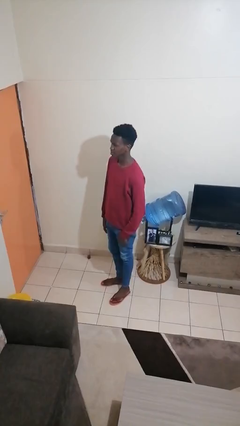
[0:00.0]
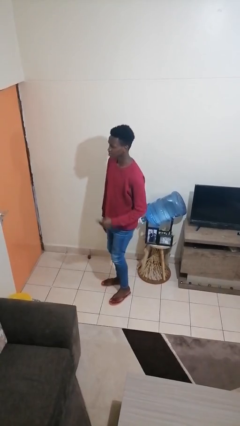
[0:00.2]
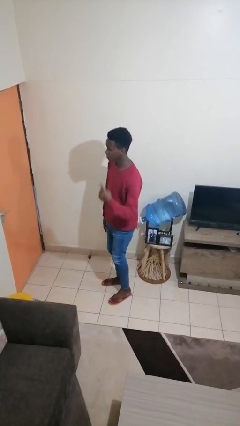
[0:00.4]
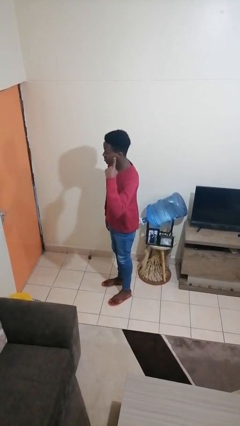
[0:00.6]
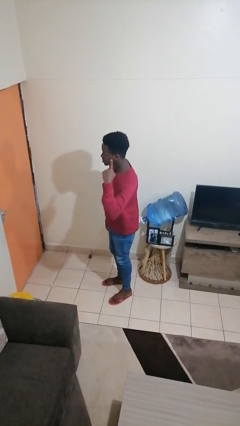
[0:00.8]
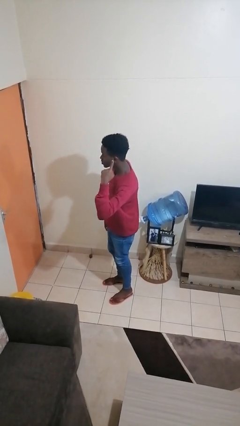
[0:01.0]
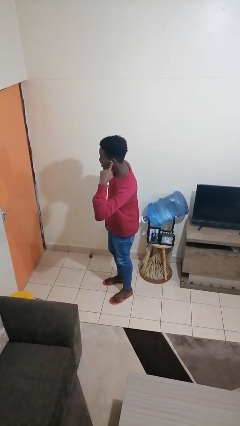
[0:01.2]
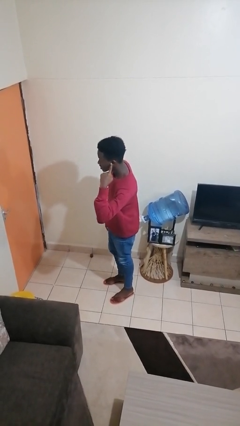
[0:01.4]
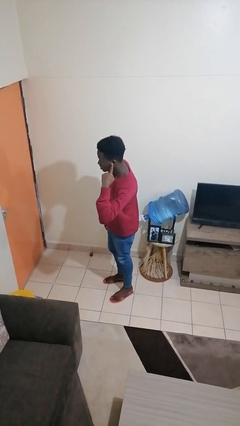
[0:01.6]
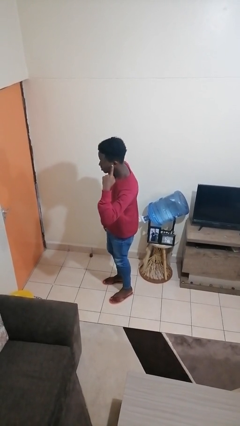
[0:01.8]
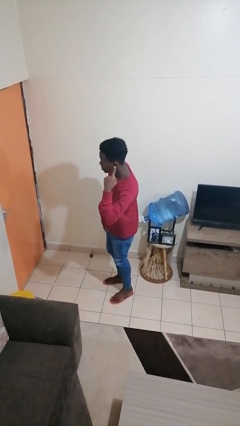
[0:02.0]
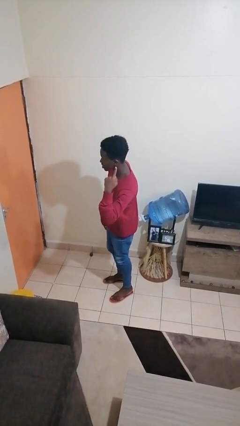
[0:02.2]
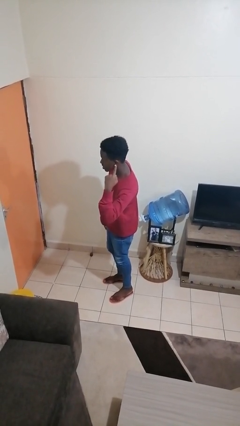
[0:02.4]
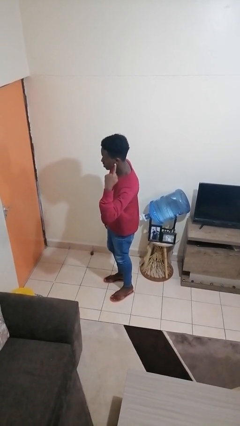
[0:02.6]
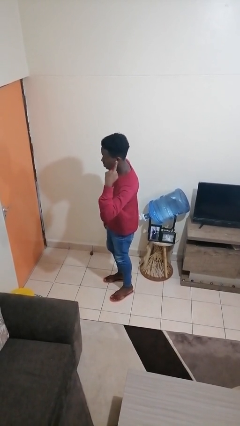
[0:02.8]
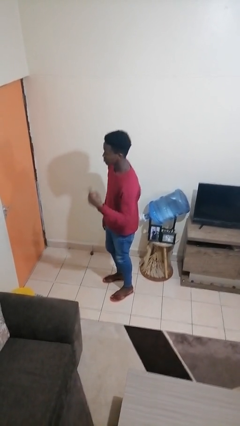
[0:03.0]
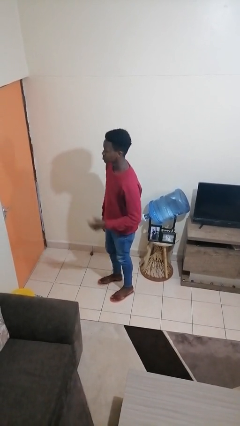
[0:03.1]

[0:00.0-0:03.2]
person gestures listen closely

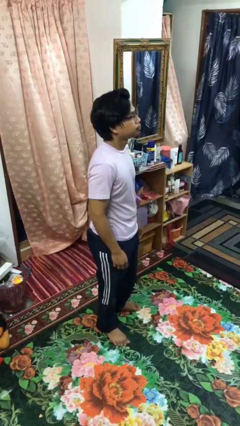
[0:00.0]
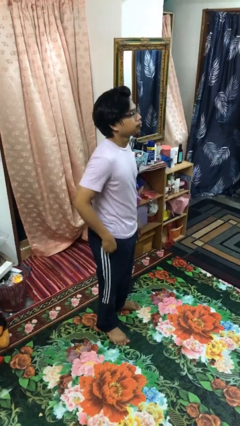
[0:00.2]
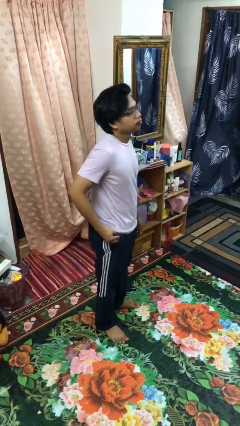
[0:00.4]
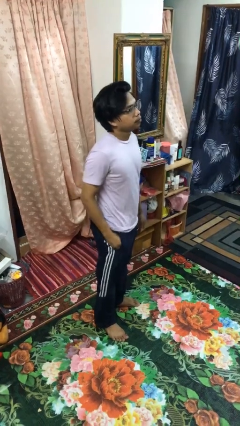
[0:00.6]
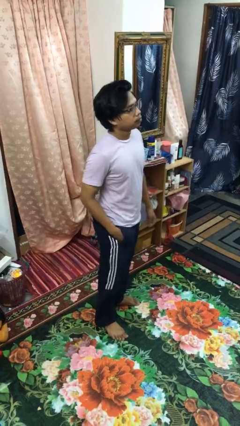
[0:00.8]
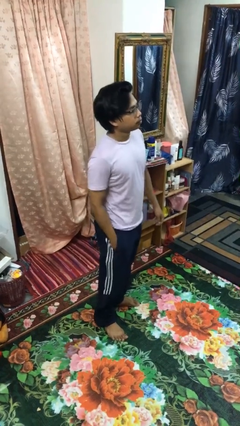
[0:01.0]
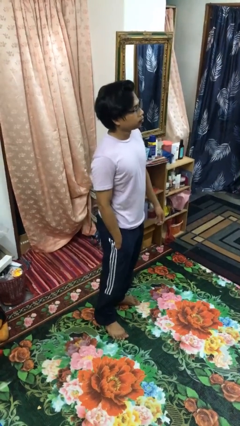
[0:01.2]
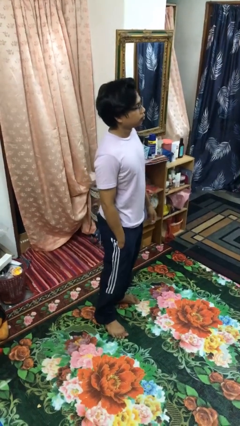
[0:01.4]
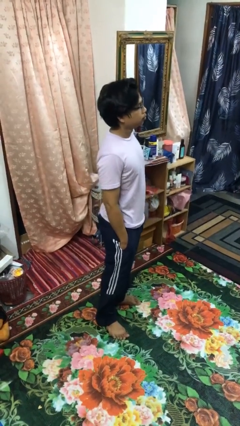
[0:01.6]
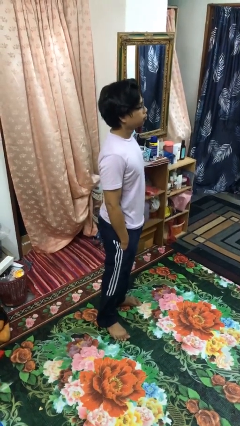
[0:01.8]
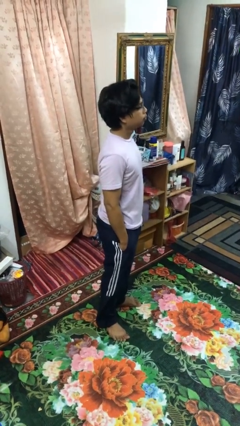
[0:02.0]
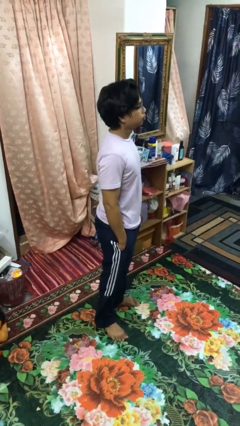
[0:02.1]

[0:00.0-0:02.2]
person puts hands in back pockets

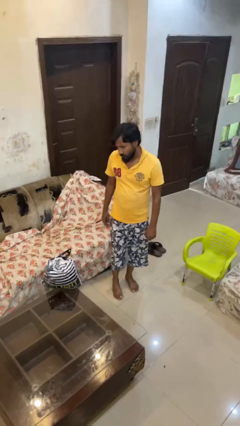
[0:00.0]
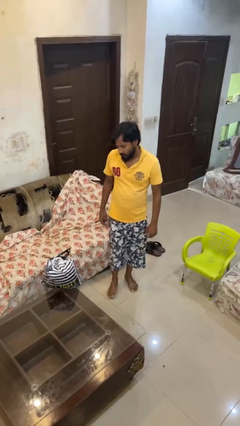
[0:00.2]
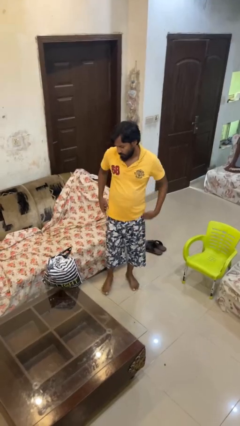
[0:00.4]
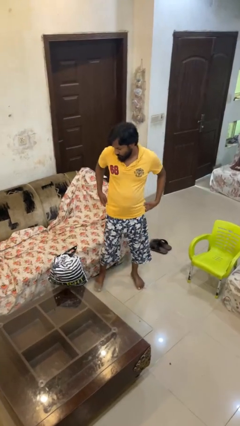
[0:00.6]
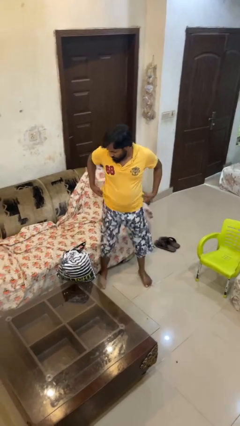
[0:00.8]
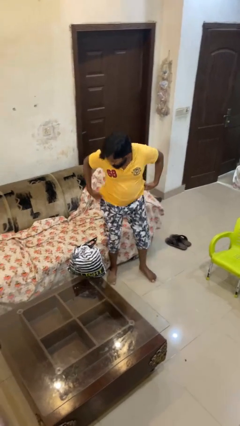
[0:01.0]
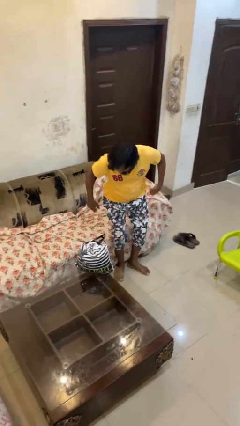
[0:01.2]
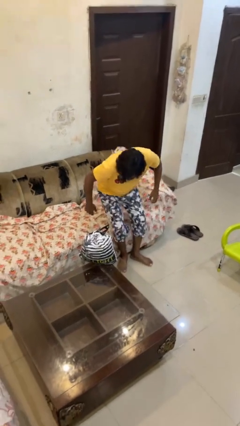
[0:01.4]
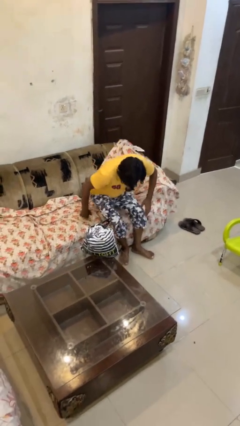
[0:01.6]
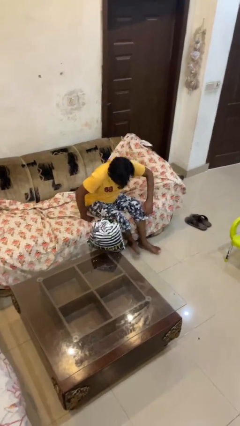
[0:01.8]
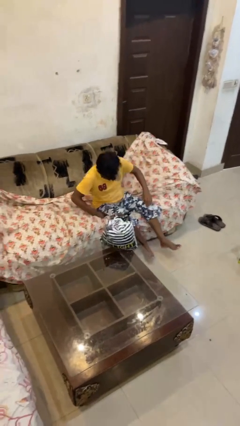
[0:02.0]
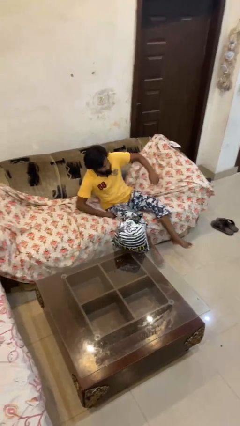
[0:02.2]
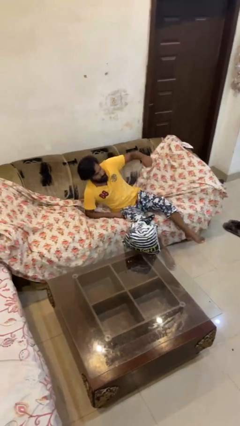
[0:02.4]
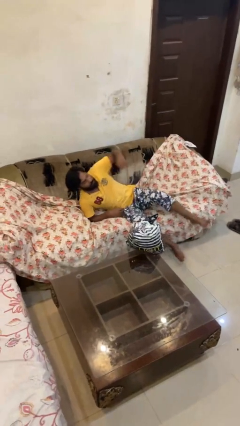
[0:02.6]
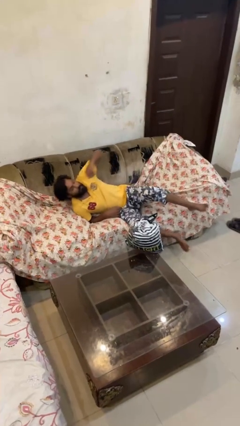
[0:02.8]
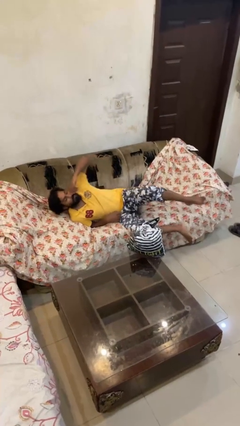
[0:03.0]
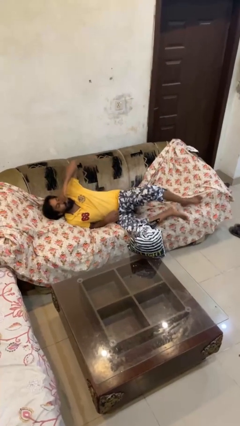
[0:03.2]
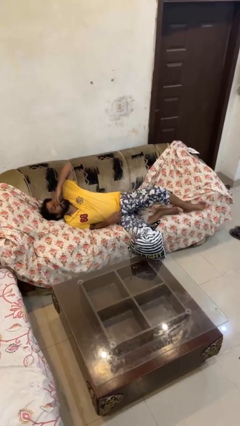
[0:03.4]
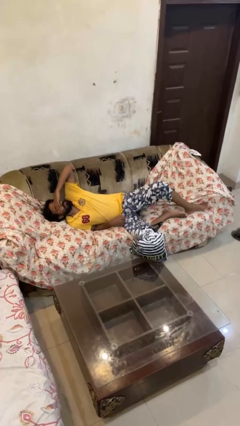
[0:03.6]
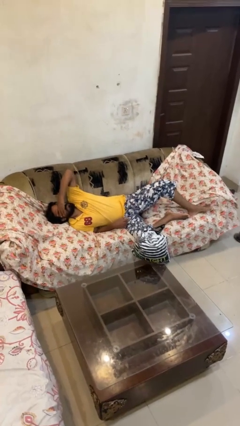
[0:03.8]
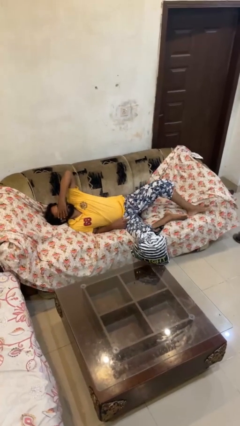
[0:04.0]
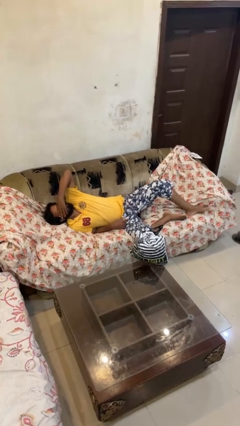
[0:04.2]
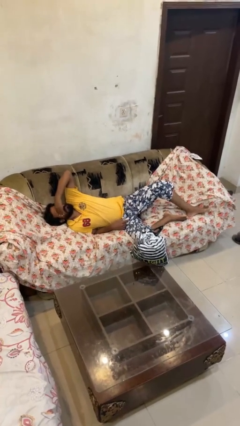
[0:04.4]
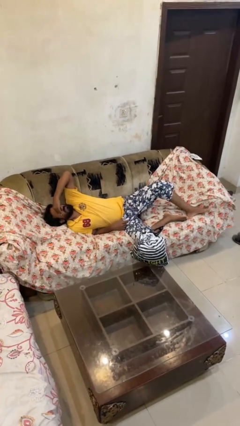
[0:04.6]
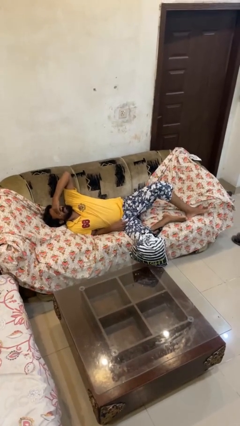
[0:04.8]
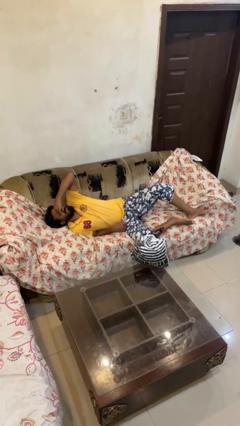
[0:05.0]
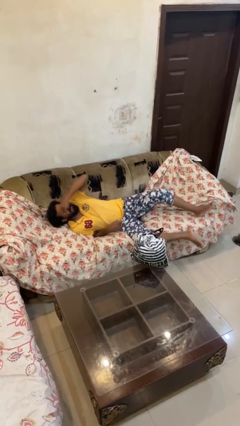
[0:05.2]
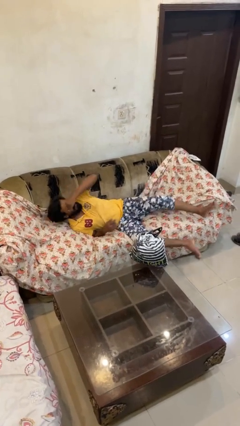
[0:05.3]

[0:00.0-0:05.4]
person lies down on couch

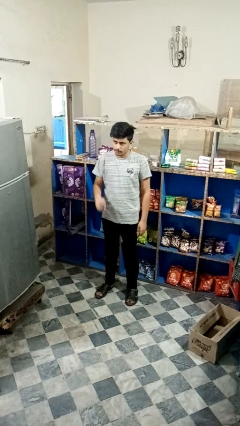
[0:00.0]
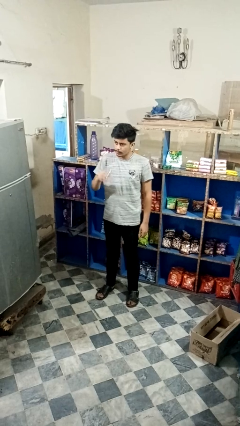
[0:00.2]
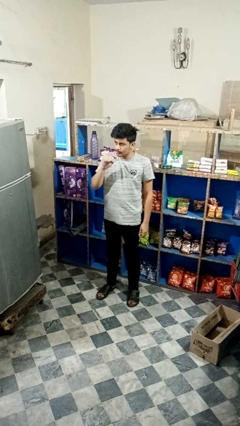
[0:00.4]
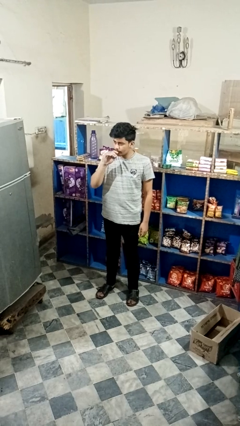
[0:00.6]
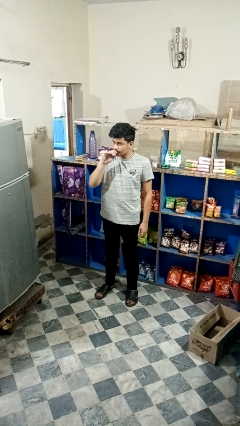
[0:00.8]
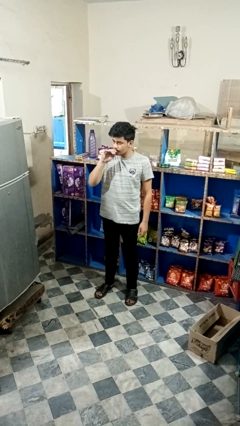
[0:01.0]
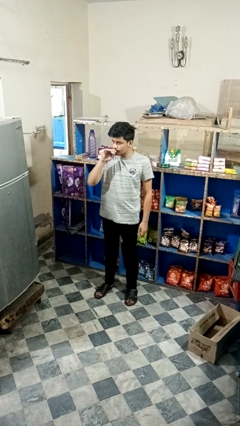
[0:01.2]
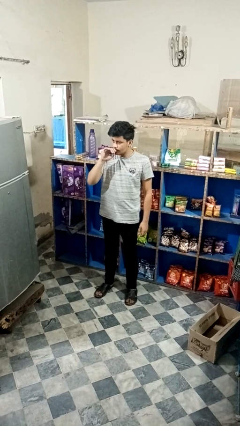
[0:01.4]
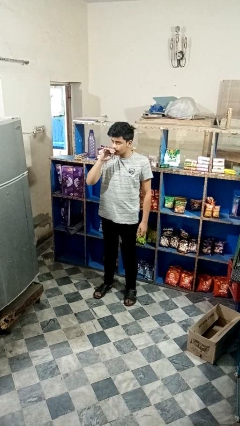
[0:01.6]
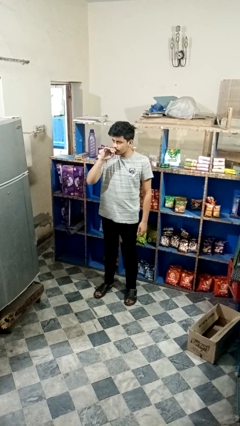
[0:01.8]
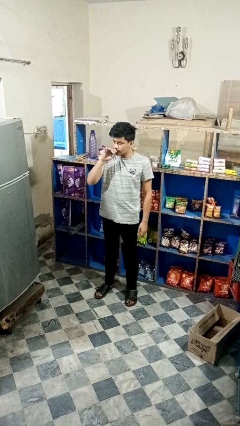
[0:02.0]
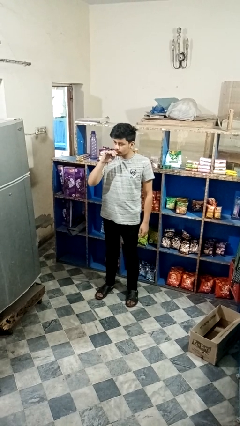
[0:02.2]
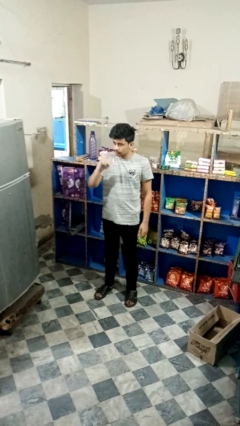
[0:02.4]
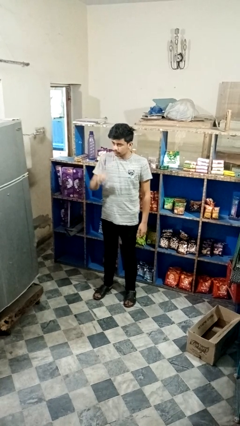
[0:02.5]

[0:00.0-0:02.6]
person vapes

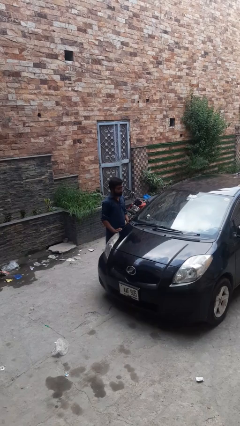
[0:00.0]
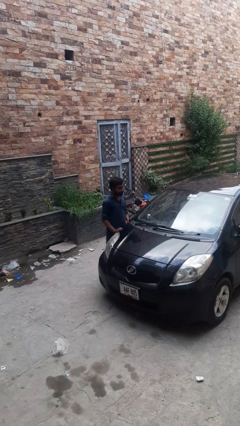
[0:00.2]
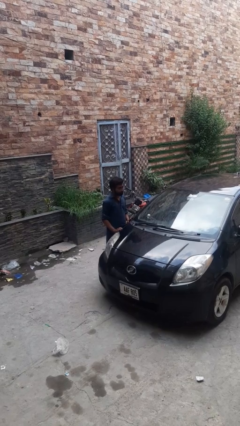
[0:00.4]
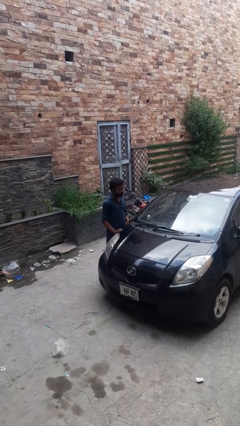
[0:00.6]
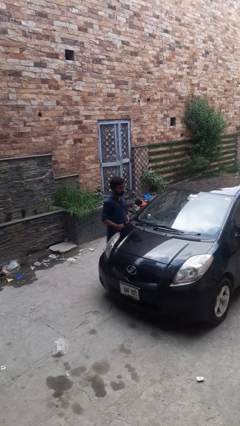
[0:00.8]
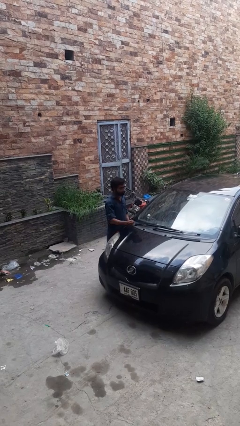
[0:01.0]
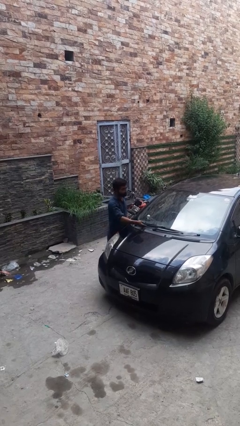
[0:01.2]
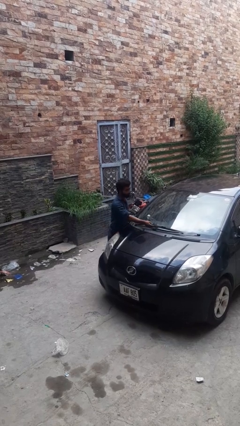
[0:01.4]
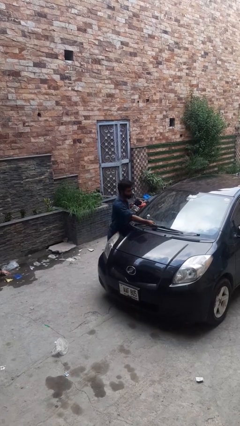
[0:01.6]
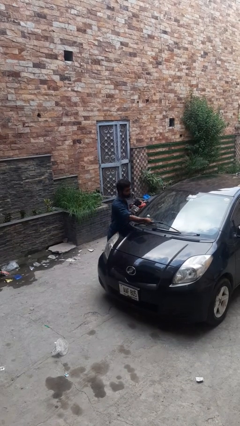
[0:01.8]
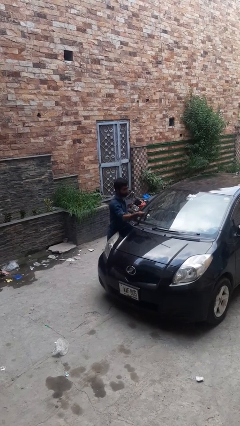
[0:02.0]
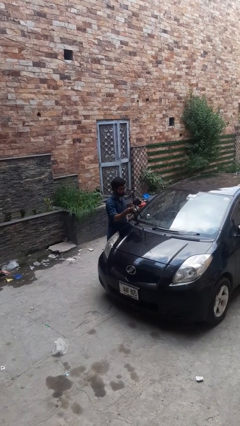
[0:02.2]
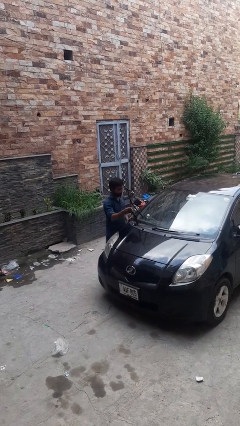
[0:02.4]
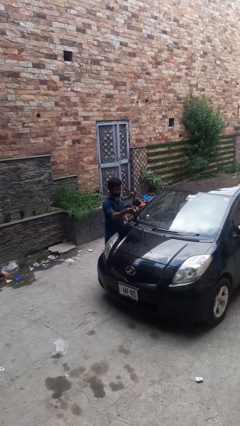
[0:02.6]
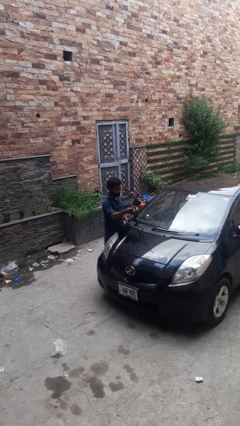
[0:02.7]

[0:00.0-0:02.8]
person flips up car wipers

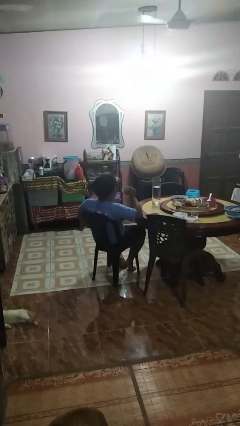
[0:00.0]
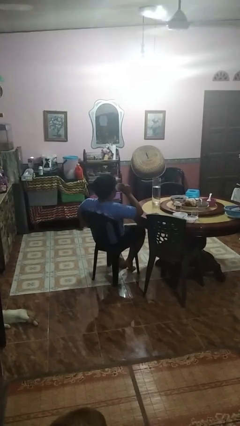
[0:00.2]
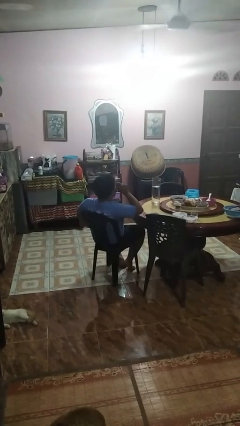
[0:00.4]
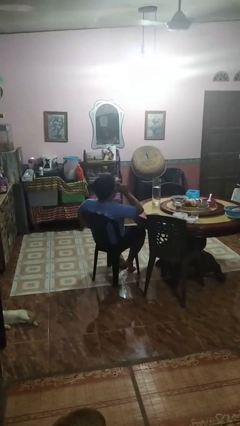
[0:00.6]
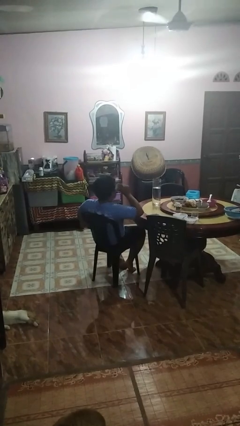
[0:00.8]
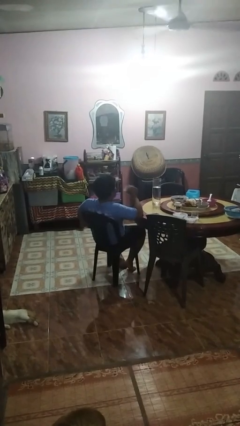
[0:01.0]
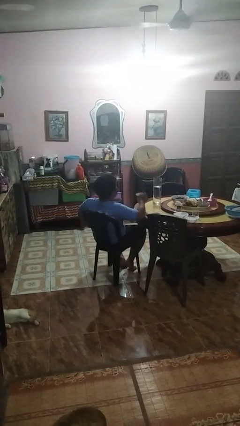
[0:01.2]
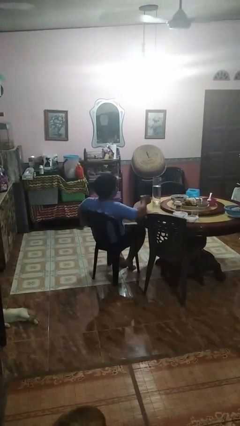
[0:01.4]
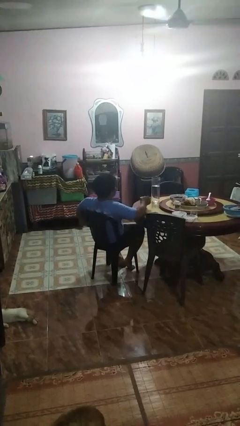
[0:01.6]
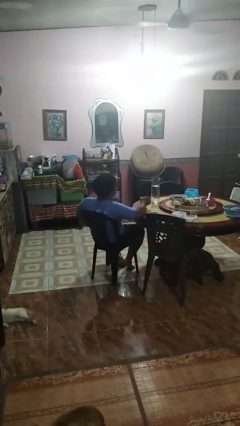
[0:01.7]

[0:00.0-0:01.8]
person drinks from mug
